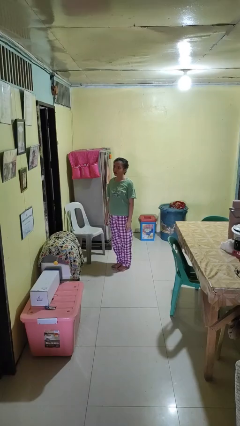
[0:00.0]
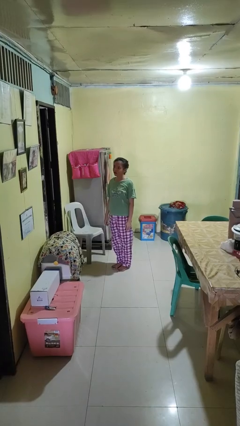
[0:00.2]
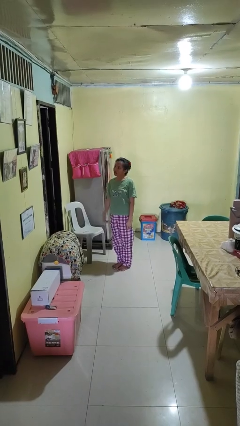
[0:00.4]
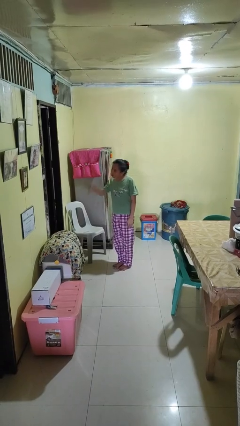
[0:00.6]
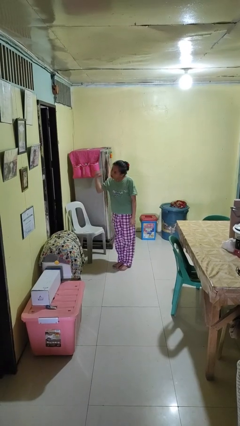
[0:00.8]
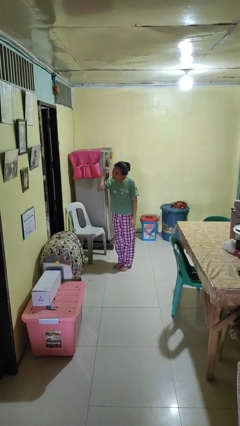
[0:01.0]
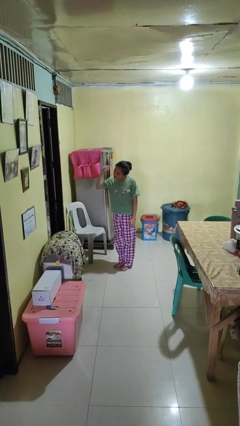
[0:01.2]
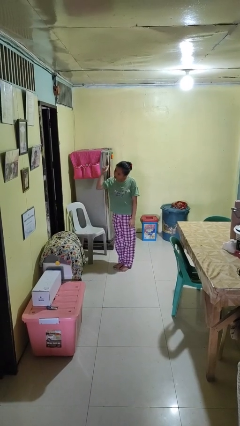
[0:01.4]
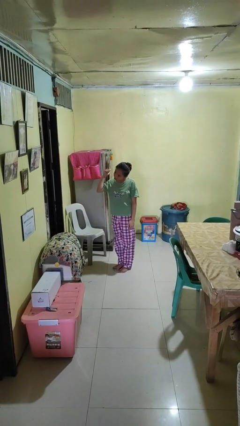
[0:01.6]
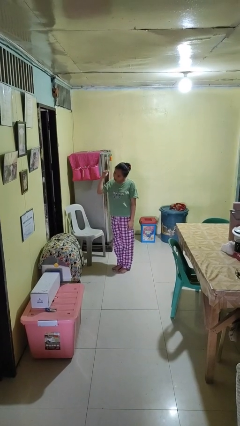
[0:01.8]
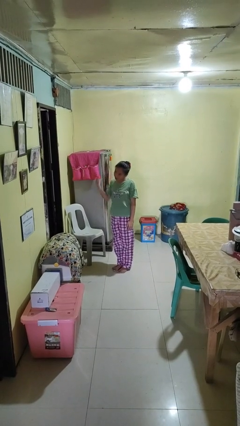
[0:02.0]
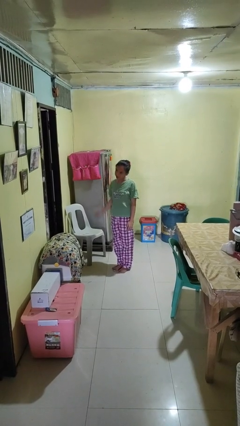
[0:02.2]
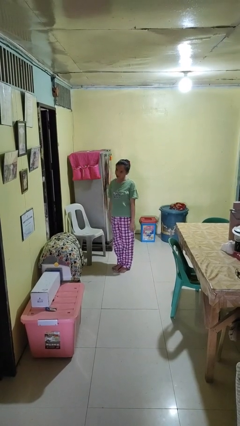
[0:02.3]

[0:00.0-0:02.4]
person gestures behind me

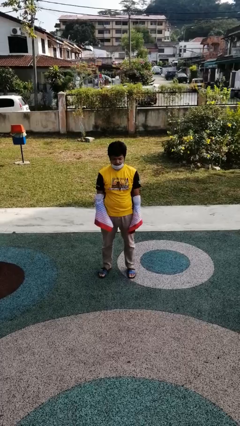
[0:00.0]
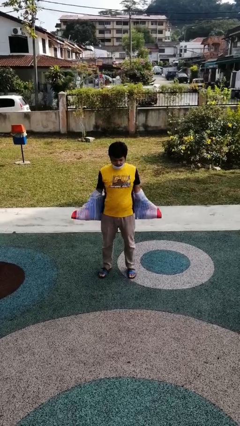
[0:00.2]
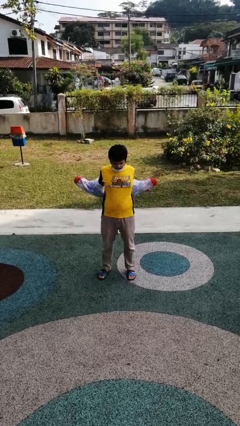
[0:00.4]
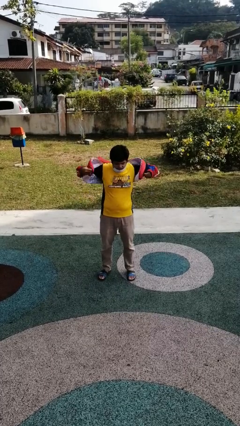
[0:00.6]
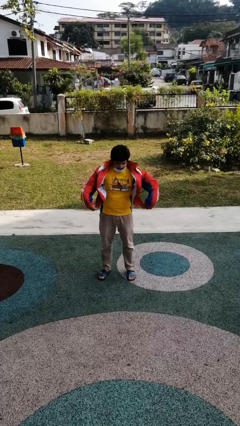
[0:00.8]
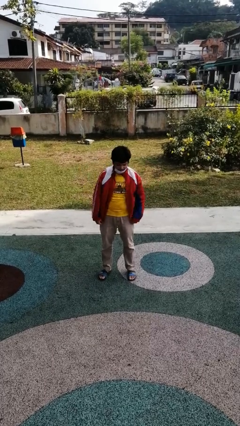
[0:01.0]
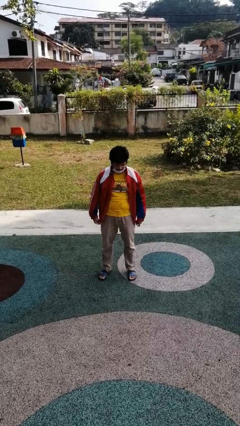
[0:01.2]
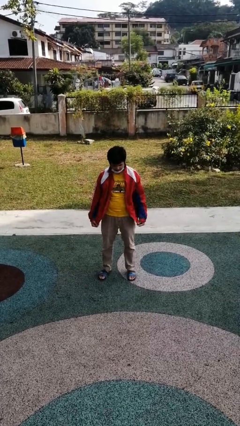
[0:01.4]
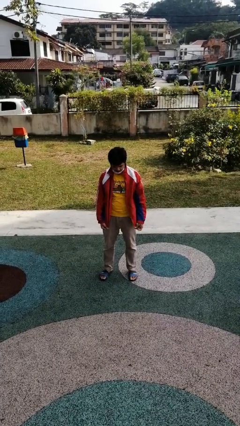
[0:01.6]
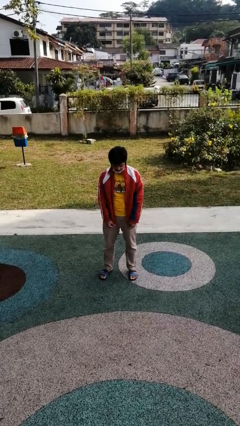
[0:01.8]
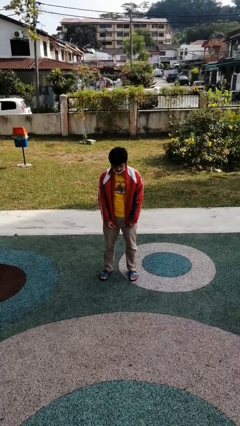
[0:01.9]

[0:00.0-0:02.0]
person puts on jacket

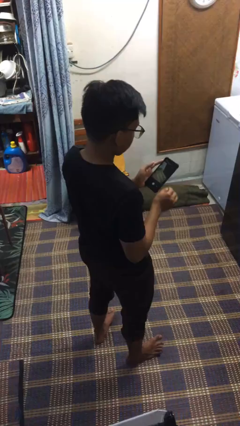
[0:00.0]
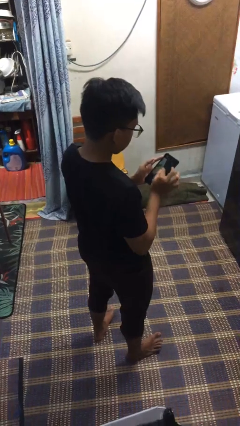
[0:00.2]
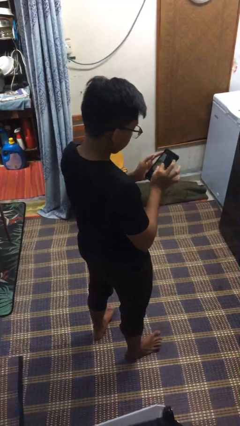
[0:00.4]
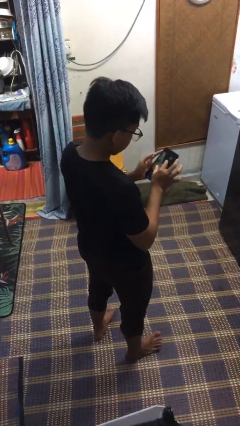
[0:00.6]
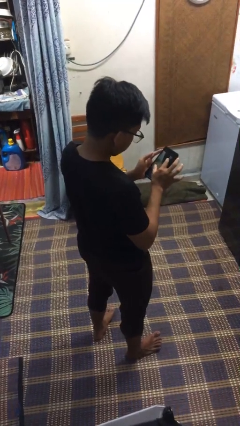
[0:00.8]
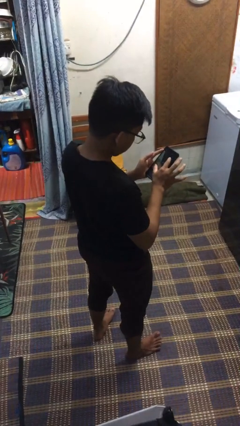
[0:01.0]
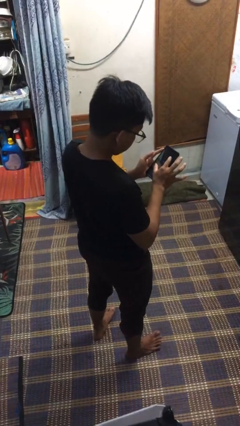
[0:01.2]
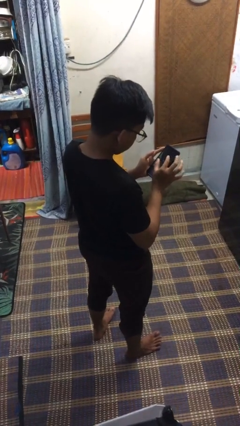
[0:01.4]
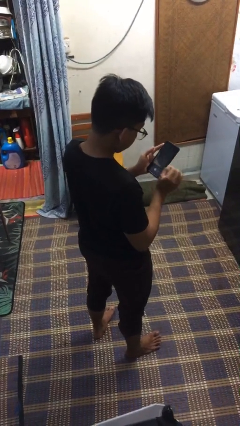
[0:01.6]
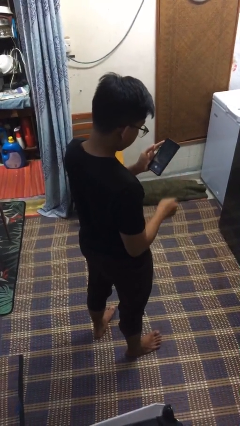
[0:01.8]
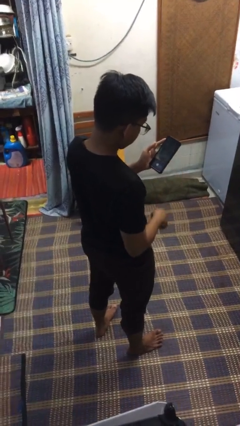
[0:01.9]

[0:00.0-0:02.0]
person gestures zoom in

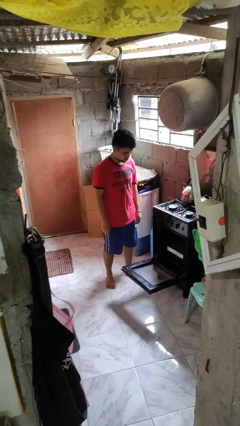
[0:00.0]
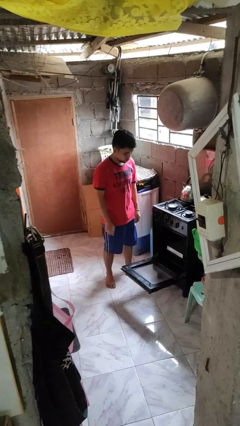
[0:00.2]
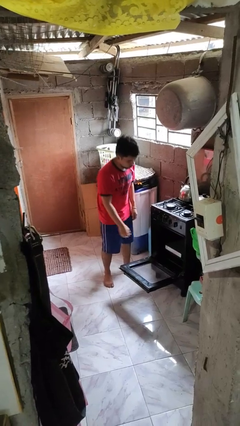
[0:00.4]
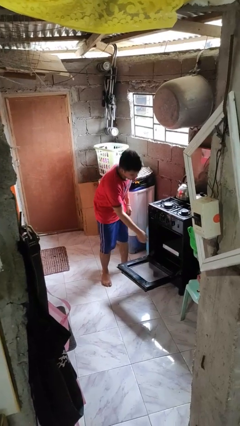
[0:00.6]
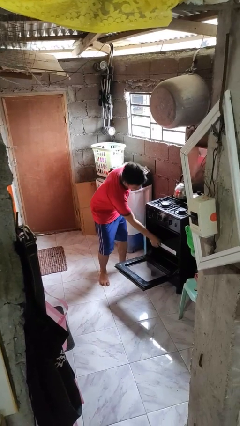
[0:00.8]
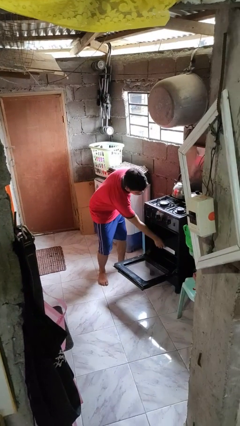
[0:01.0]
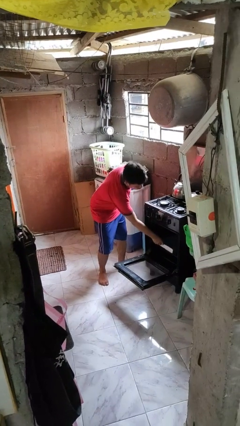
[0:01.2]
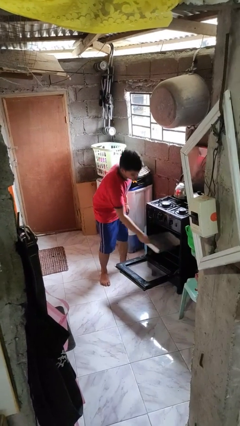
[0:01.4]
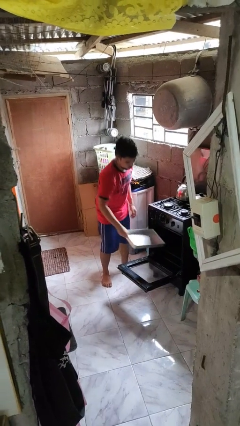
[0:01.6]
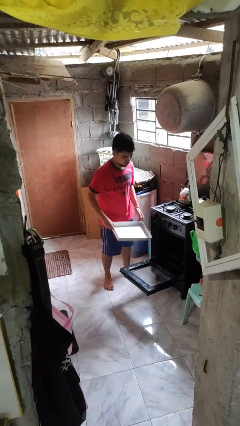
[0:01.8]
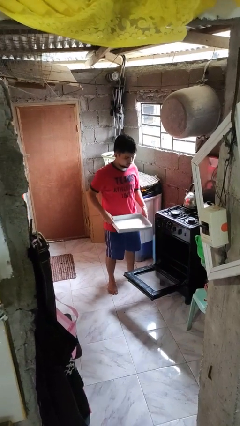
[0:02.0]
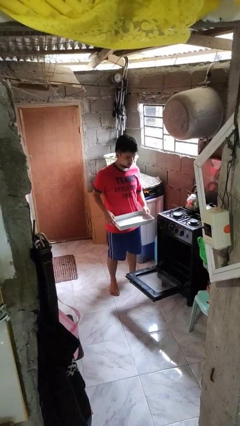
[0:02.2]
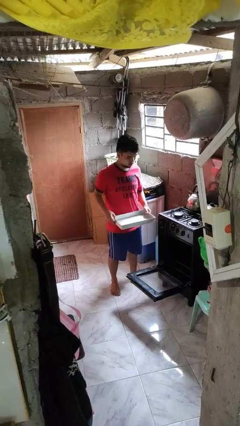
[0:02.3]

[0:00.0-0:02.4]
person takes object from oven

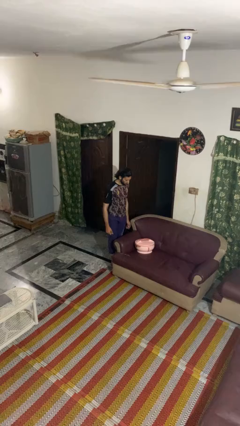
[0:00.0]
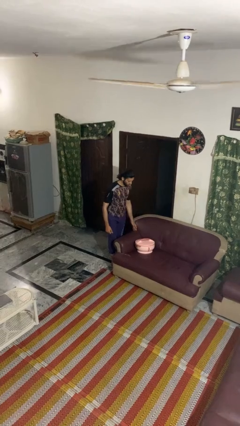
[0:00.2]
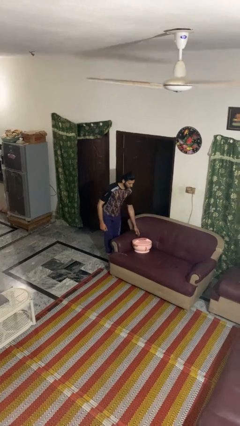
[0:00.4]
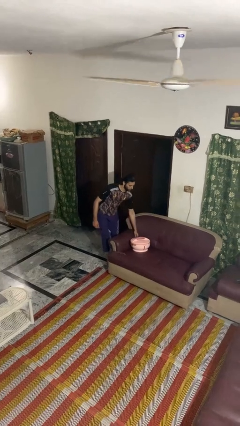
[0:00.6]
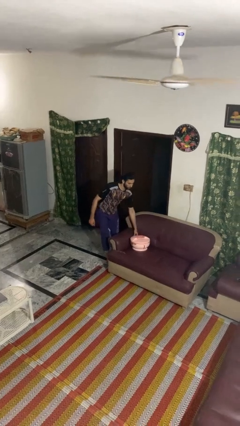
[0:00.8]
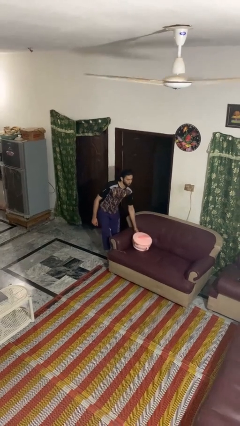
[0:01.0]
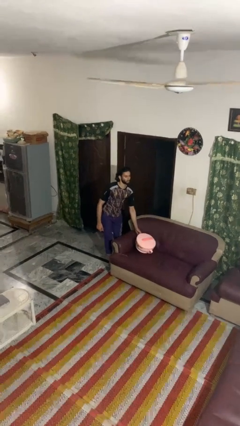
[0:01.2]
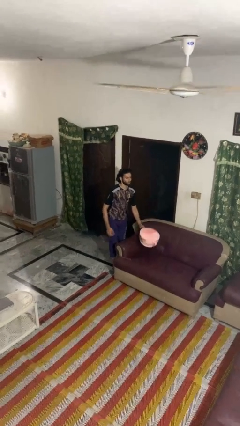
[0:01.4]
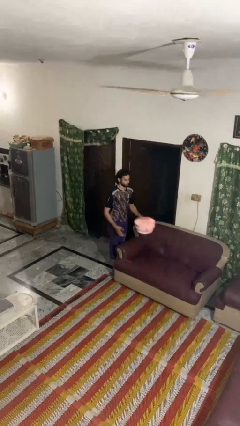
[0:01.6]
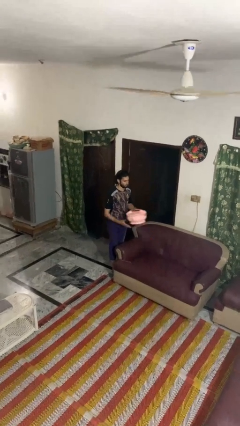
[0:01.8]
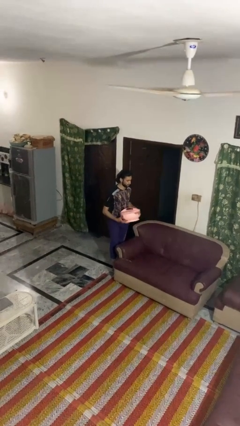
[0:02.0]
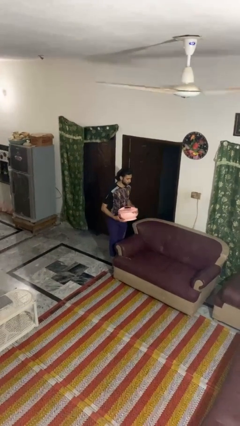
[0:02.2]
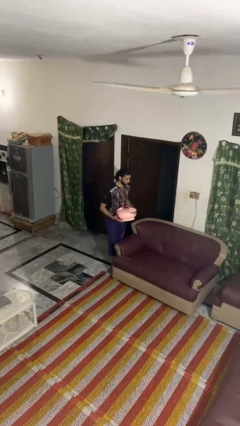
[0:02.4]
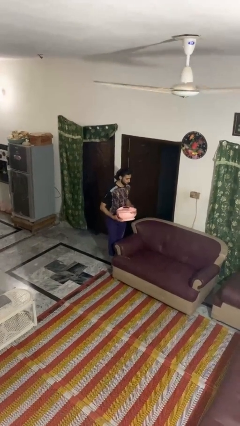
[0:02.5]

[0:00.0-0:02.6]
person picks up object from couch

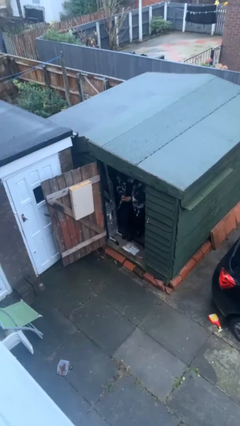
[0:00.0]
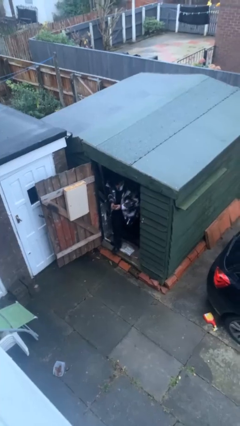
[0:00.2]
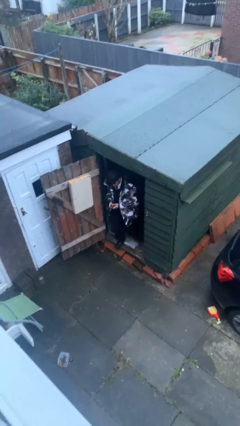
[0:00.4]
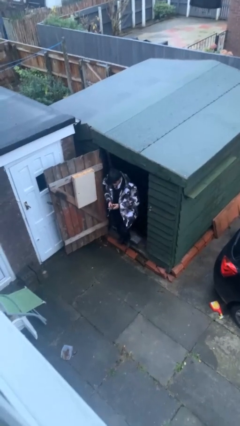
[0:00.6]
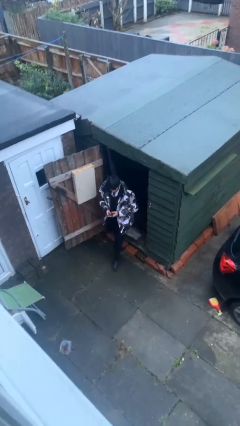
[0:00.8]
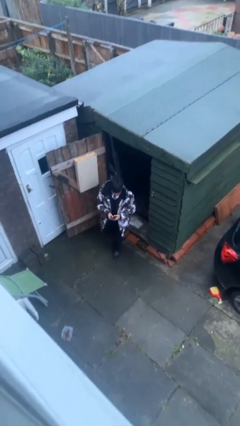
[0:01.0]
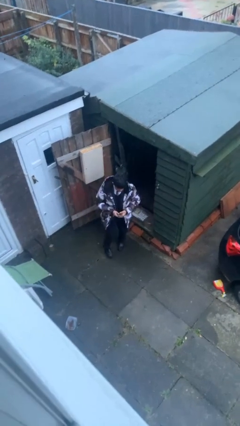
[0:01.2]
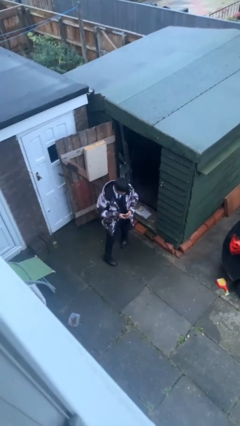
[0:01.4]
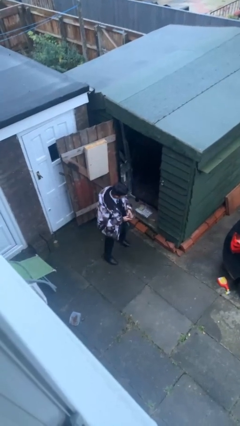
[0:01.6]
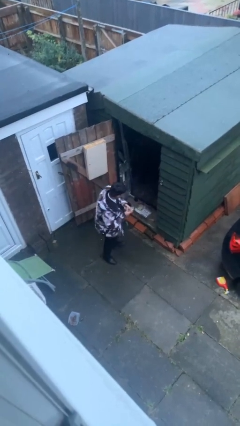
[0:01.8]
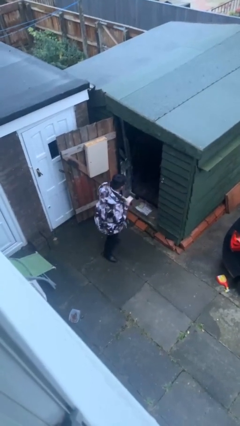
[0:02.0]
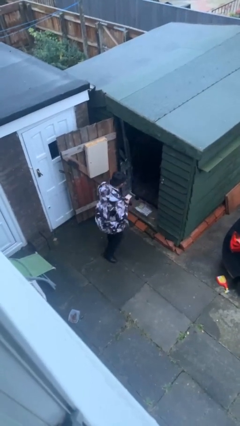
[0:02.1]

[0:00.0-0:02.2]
person enters scene through structure

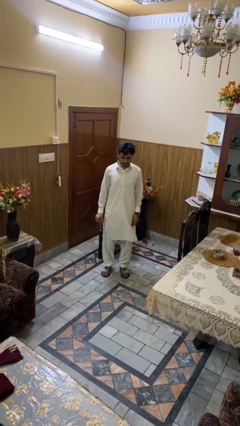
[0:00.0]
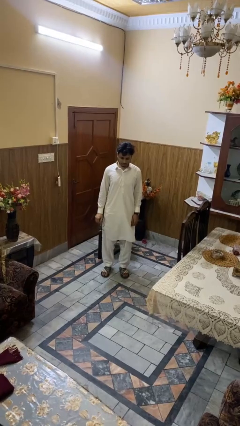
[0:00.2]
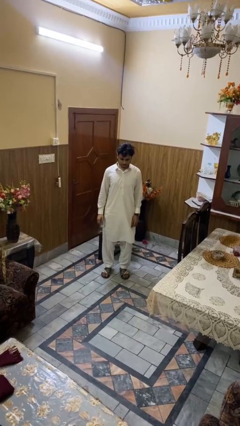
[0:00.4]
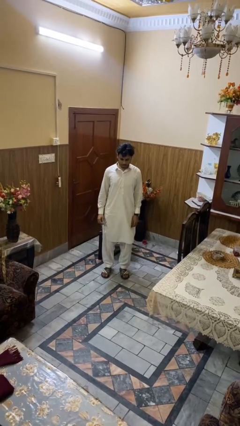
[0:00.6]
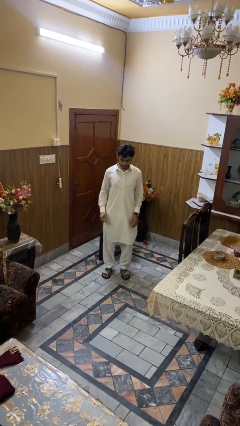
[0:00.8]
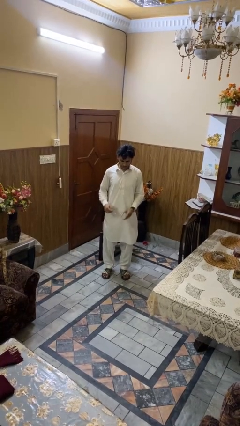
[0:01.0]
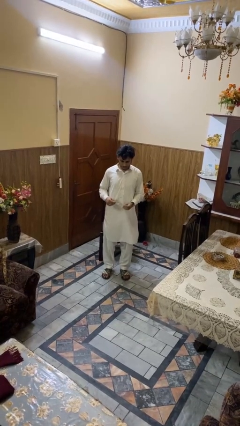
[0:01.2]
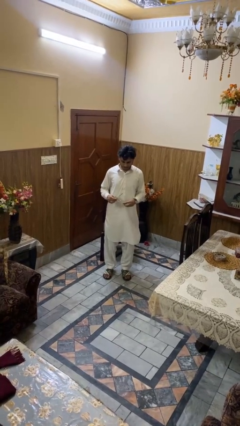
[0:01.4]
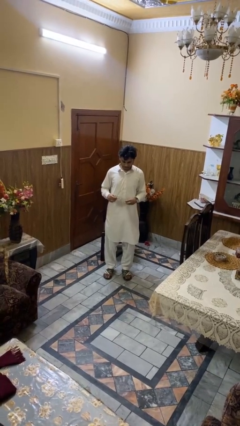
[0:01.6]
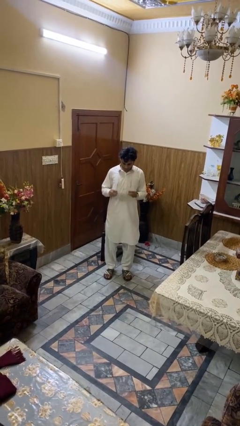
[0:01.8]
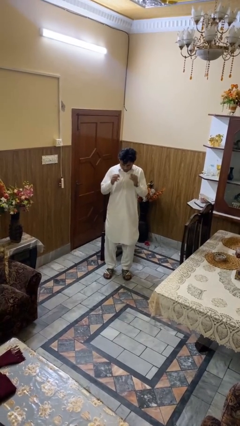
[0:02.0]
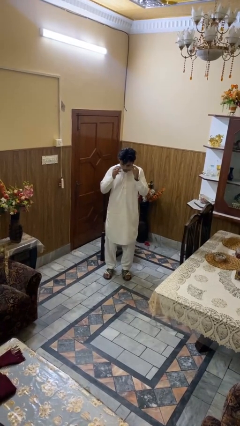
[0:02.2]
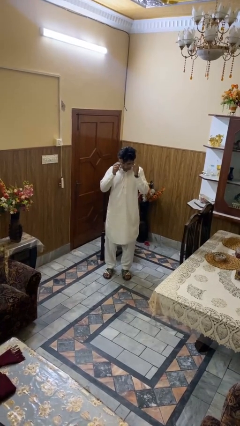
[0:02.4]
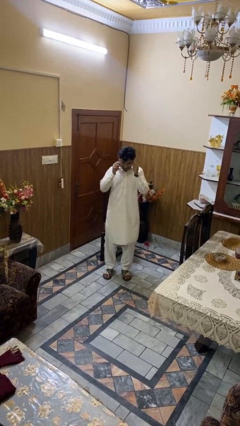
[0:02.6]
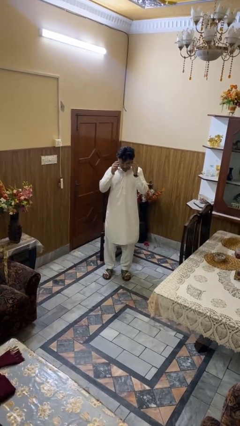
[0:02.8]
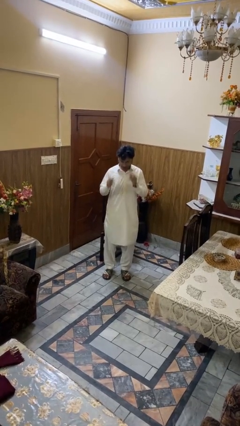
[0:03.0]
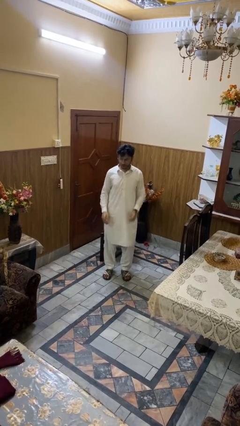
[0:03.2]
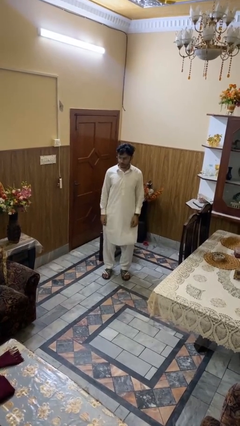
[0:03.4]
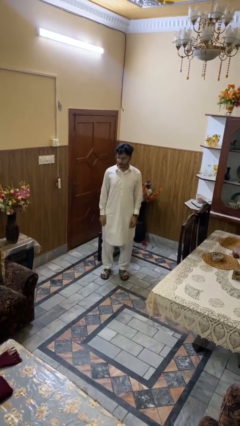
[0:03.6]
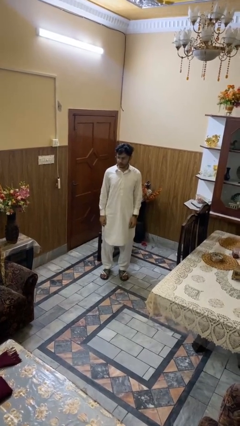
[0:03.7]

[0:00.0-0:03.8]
person puts on glasses
